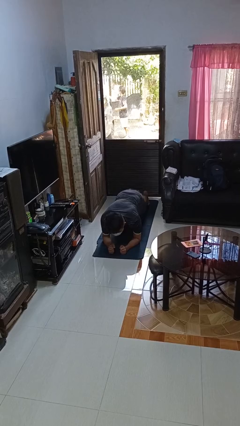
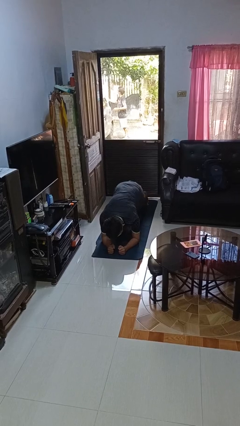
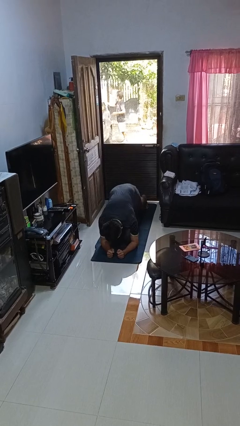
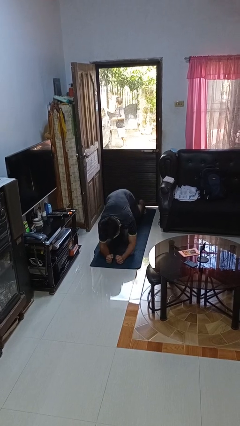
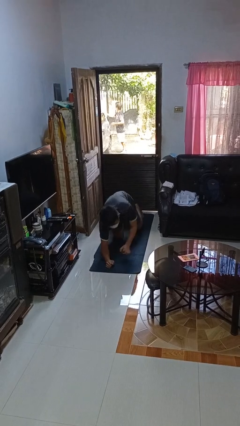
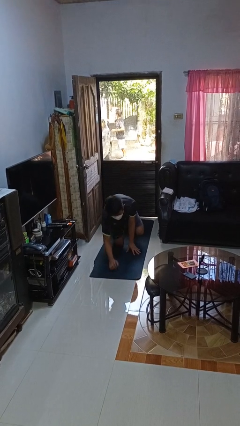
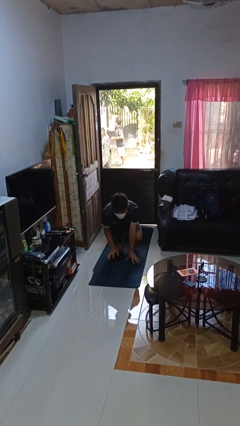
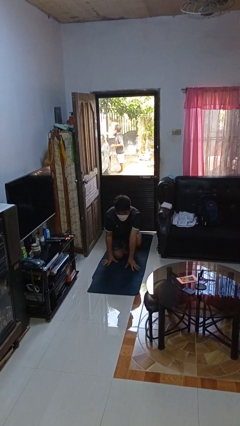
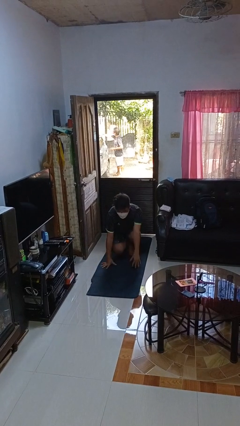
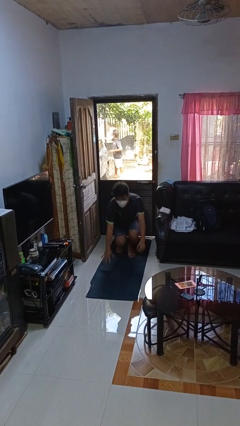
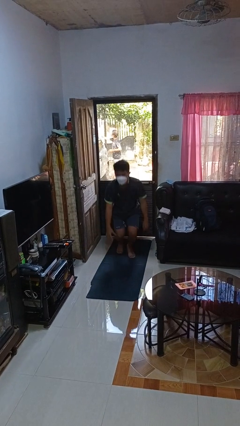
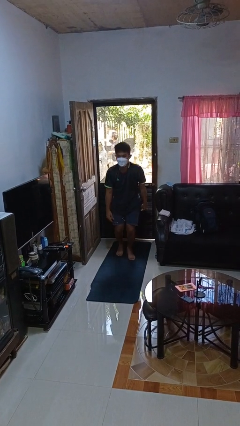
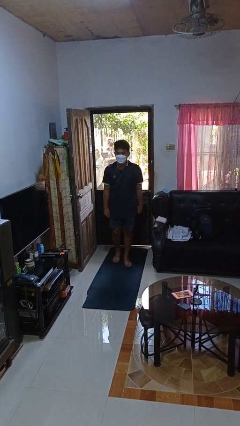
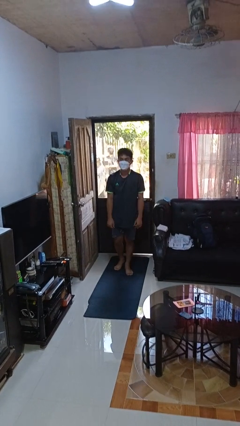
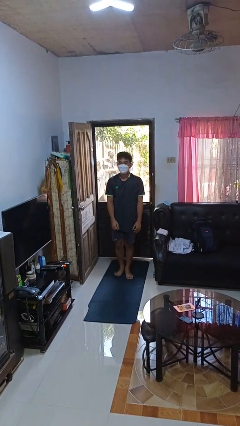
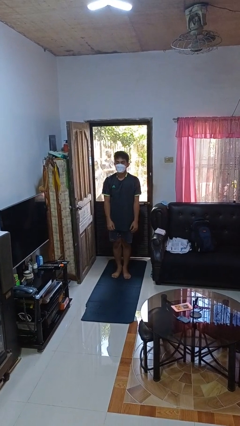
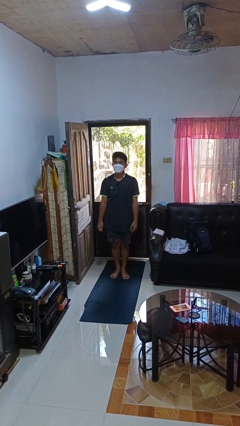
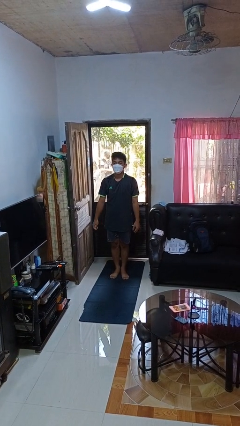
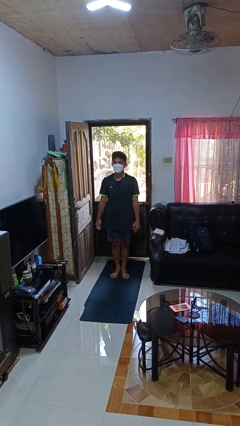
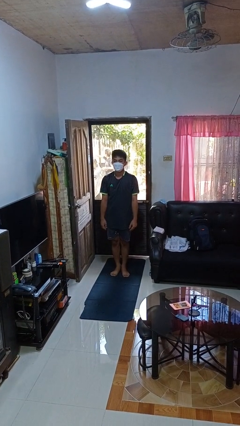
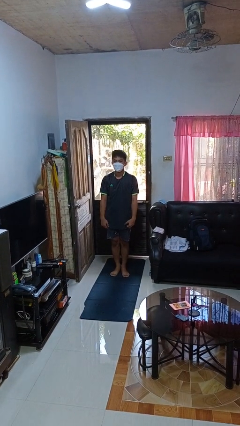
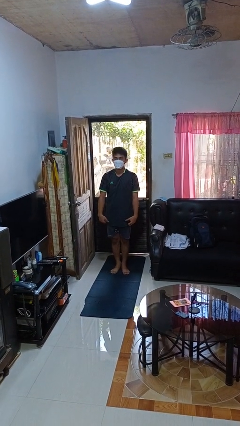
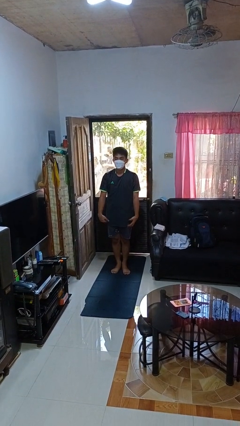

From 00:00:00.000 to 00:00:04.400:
person stands up from floor

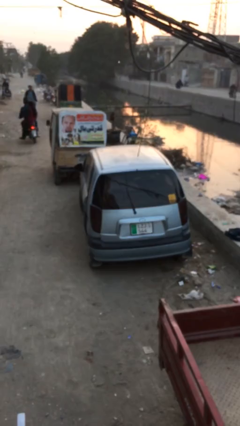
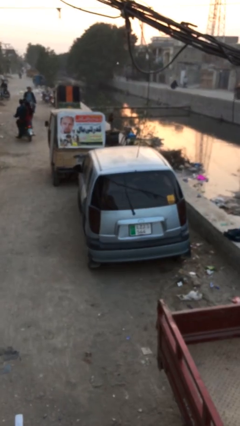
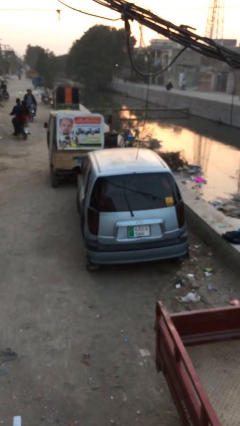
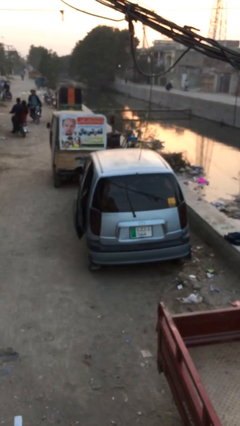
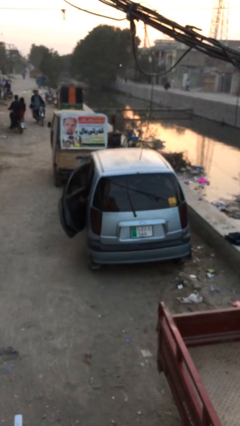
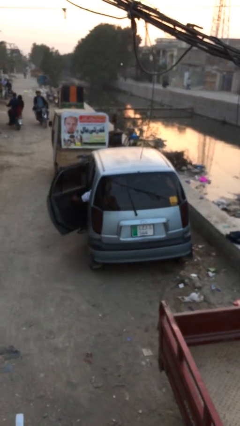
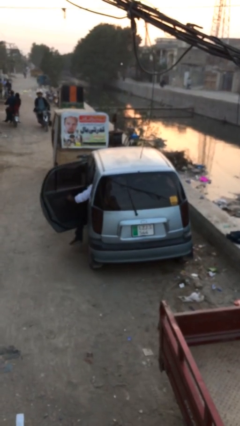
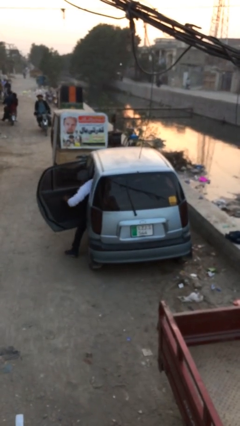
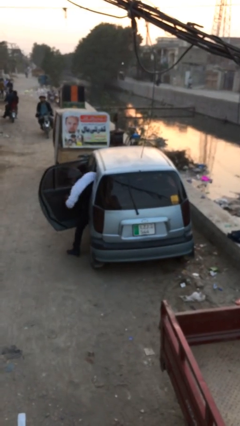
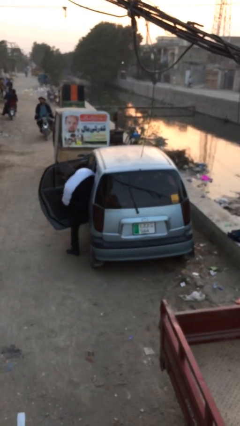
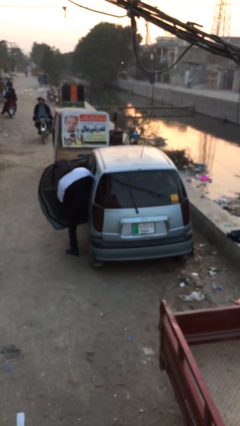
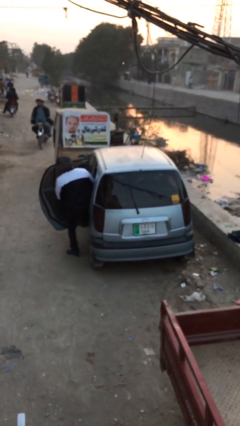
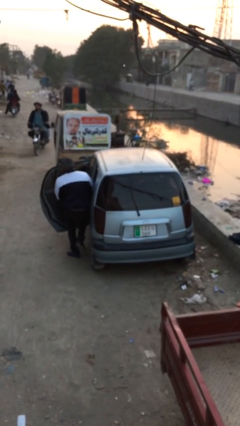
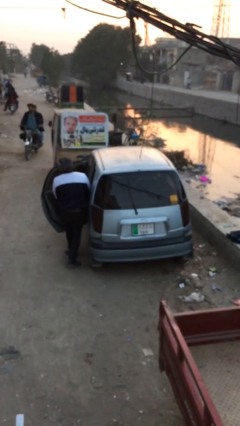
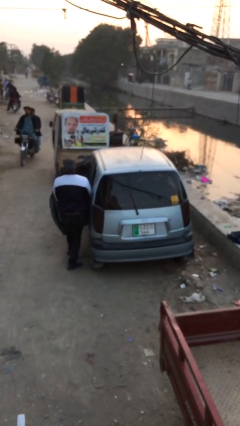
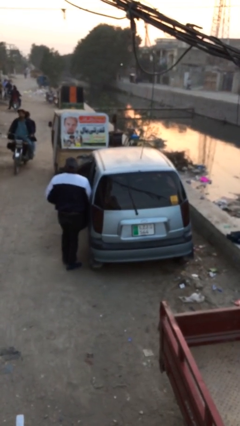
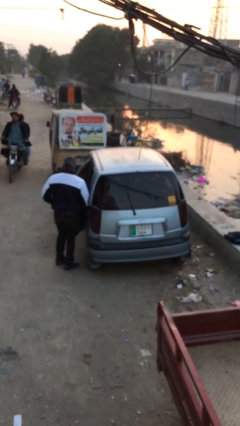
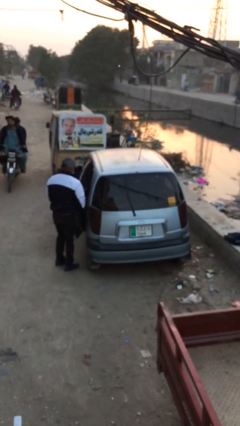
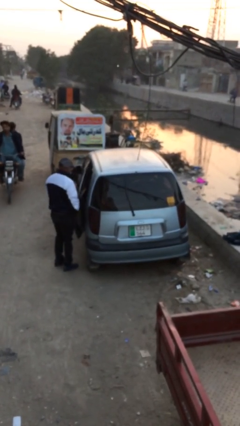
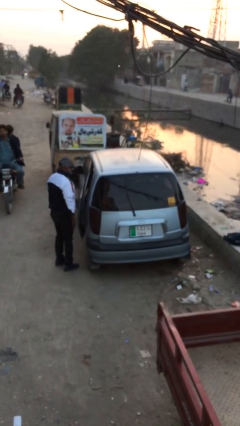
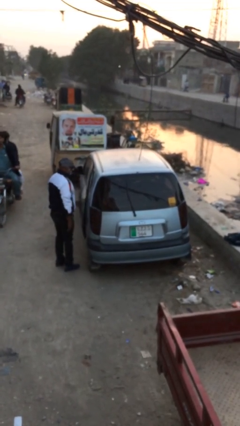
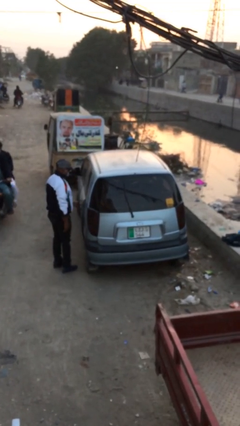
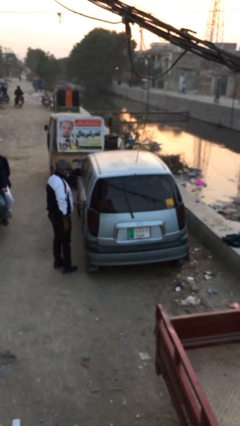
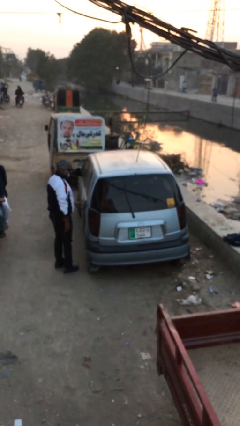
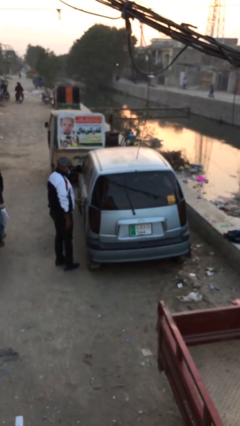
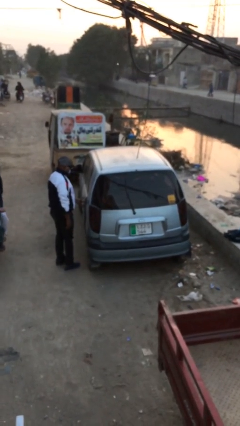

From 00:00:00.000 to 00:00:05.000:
car drops off person

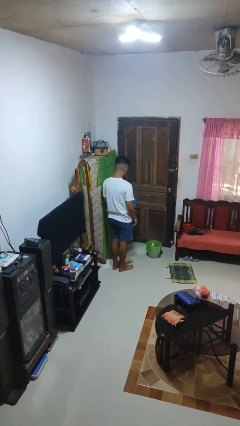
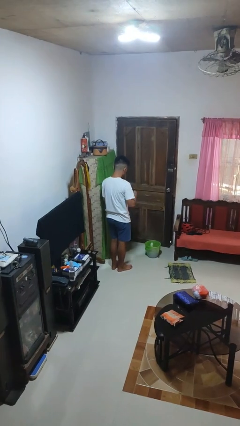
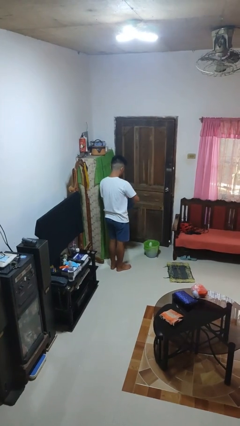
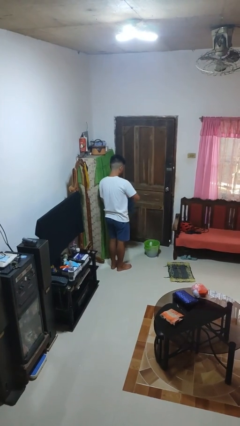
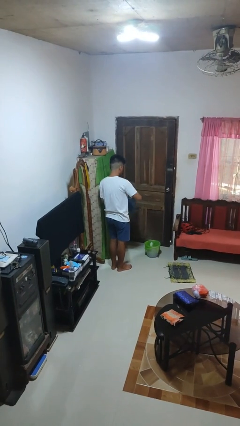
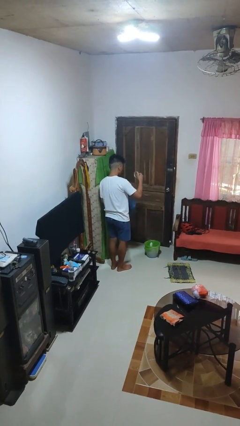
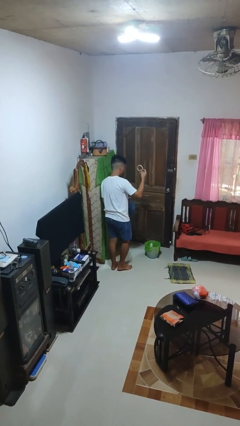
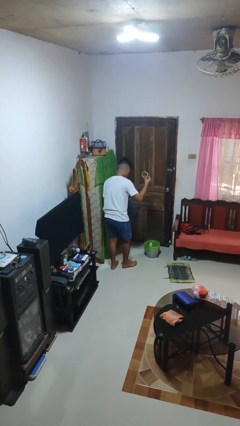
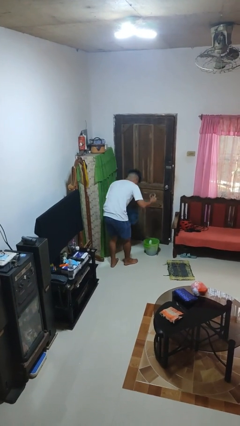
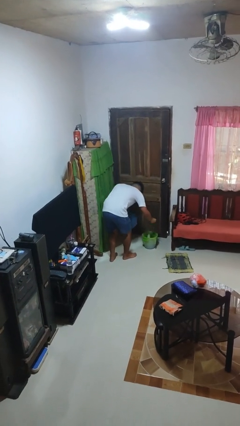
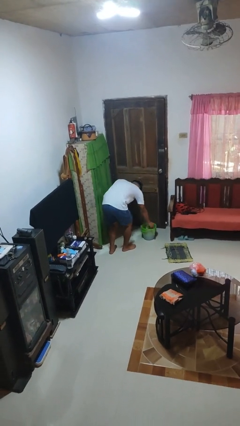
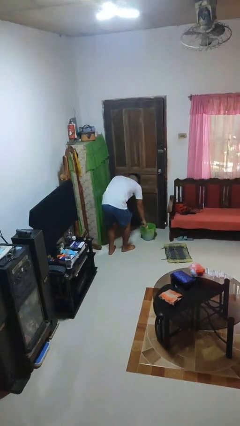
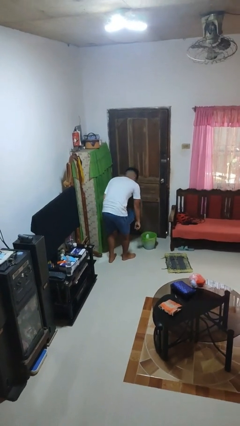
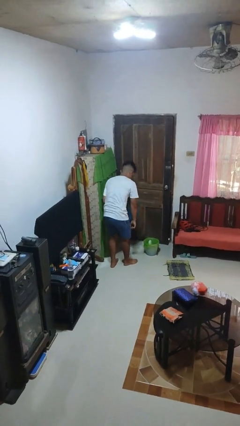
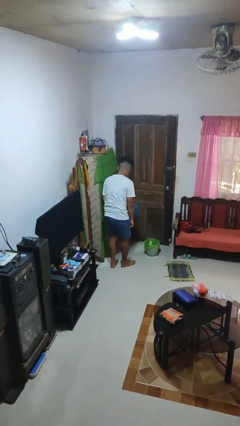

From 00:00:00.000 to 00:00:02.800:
person discards trash

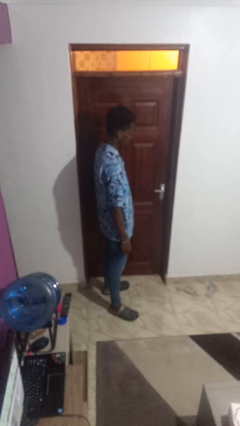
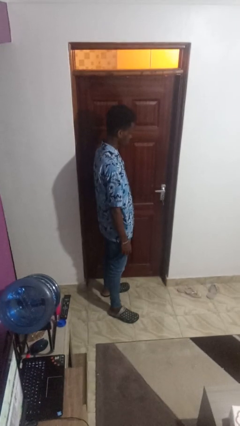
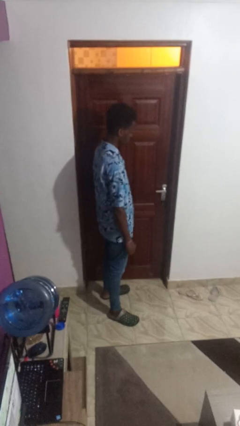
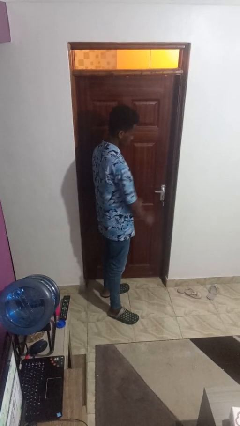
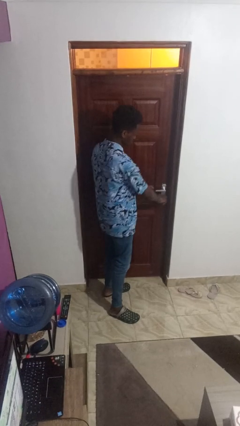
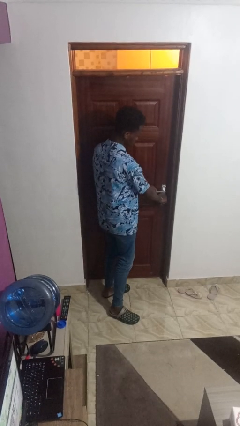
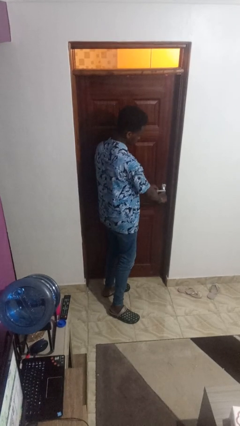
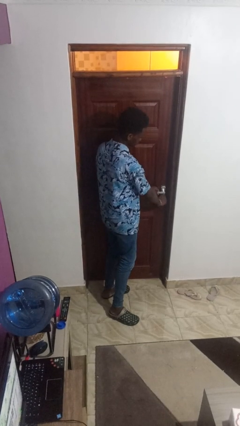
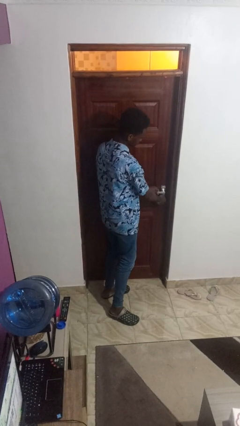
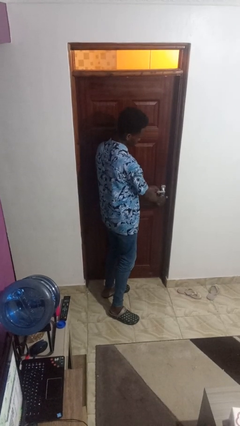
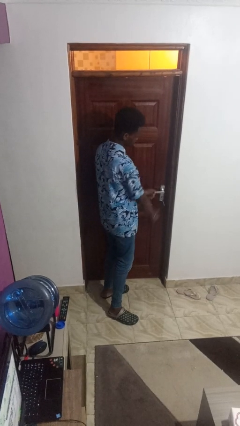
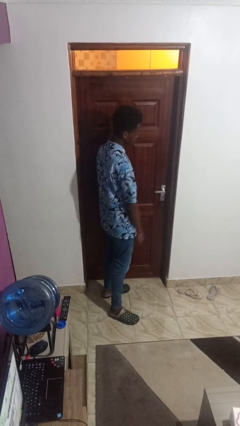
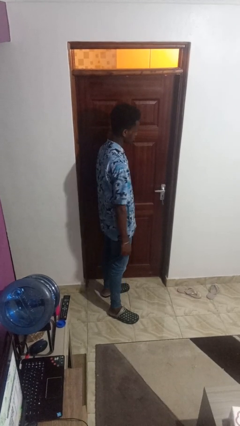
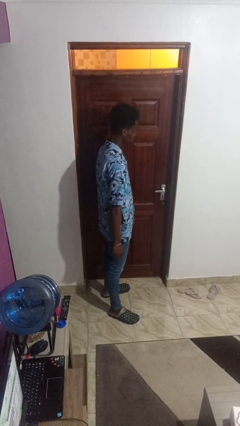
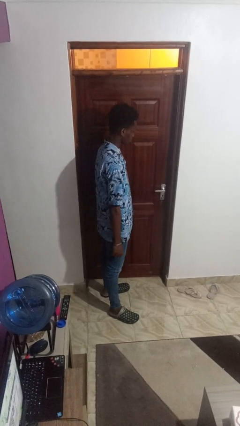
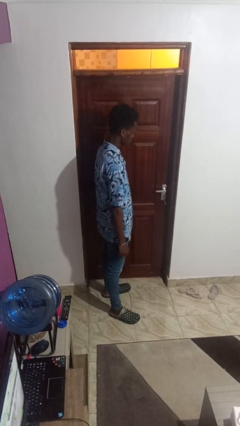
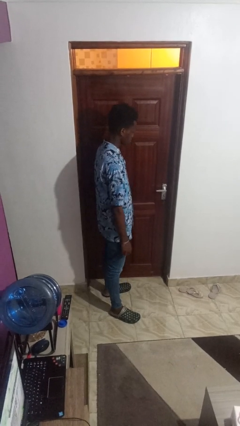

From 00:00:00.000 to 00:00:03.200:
person locks door with keys

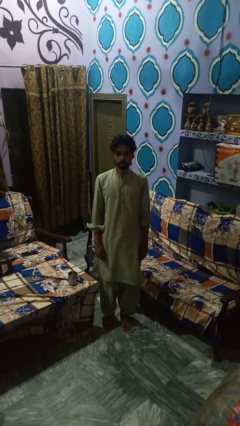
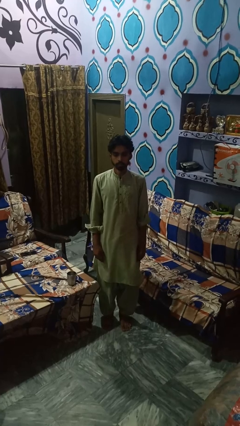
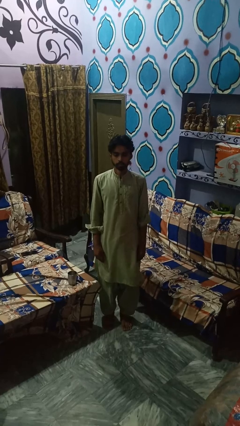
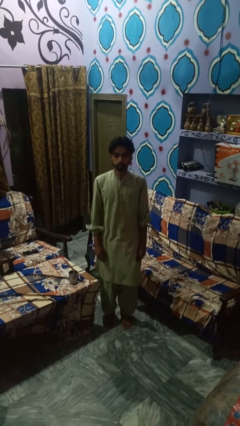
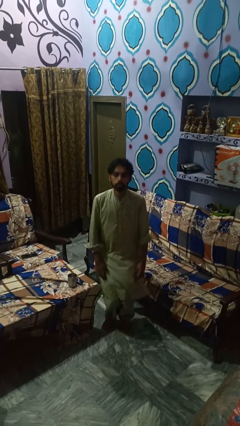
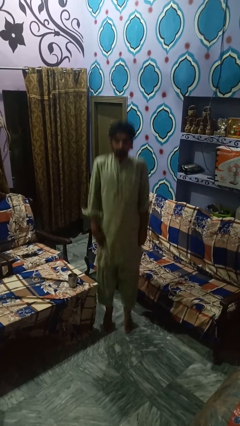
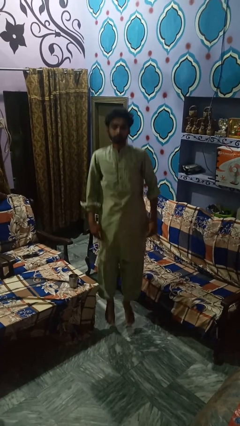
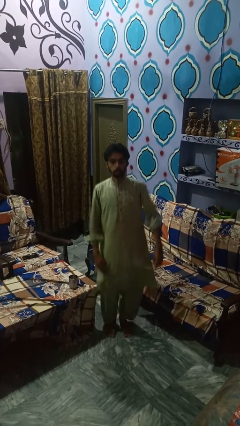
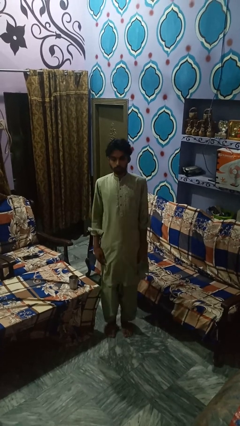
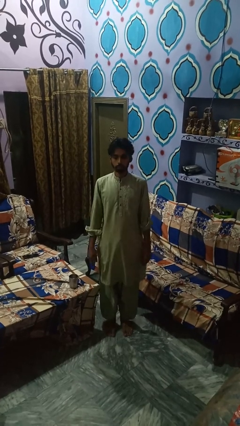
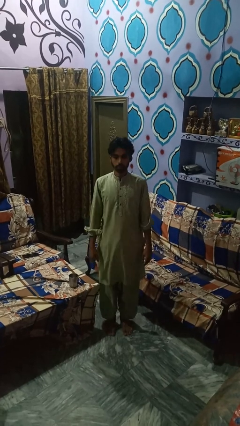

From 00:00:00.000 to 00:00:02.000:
person jumps
